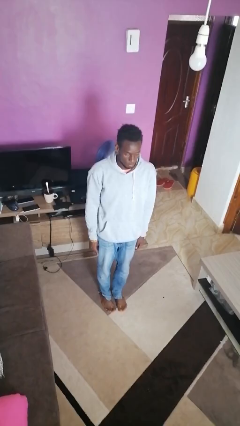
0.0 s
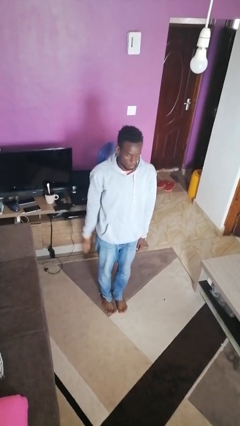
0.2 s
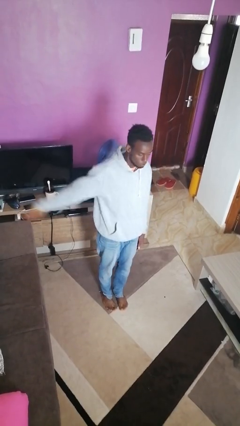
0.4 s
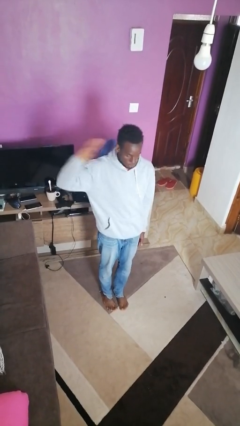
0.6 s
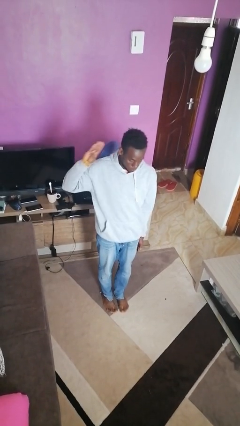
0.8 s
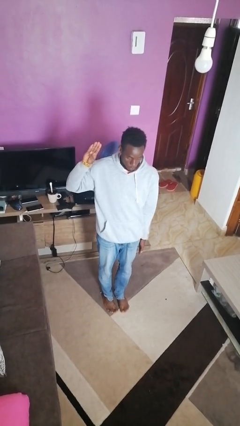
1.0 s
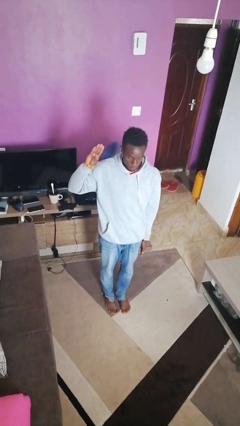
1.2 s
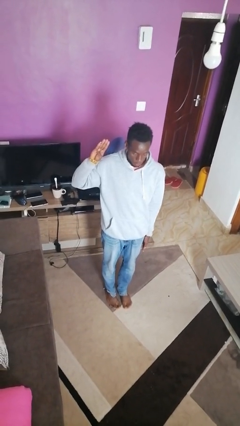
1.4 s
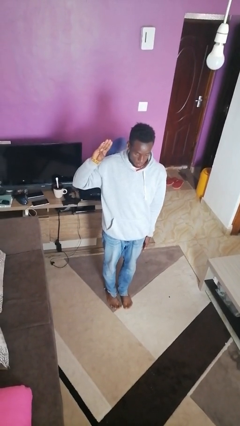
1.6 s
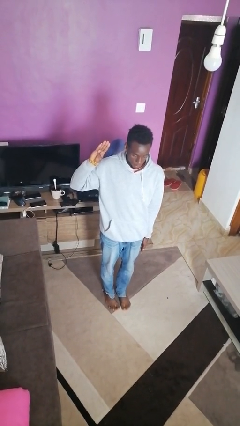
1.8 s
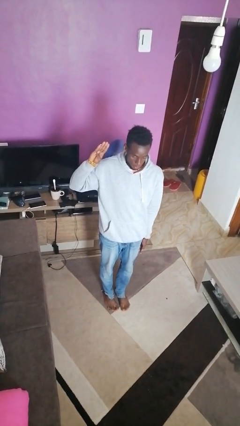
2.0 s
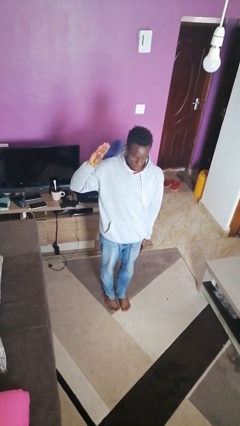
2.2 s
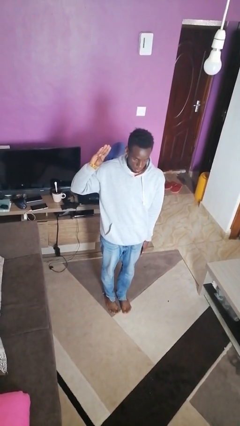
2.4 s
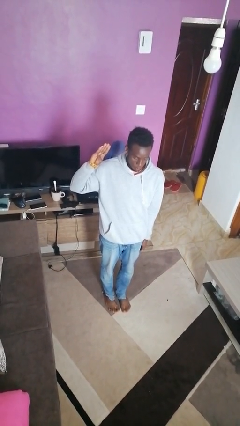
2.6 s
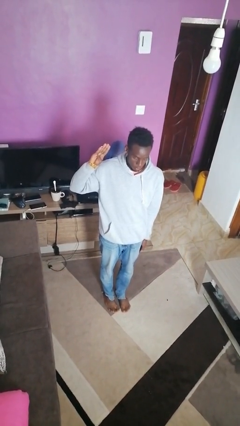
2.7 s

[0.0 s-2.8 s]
person salutes

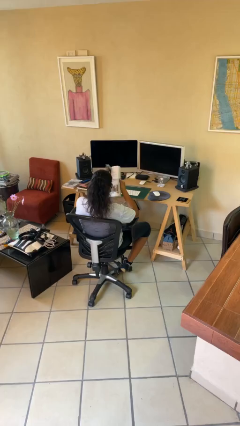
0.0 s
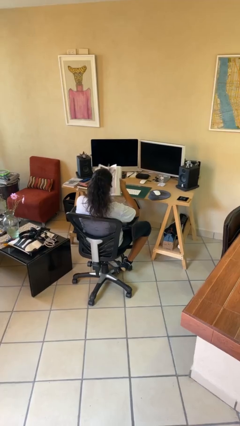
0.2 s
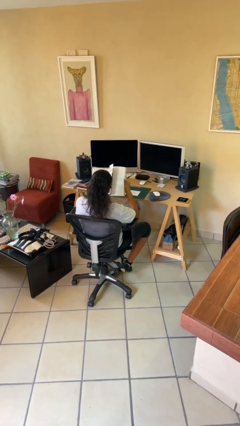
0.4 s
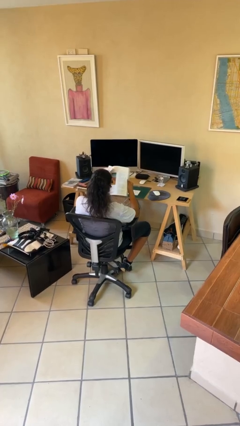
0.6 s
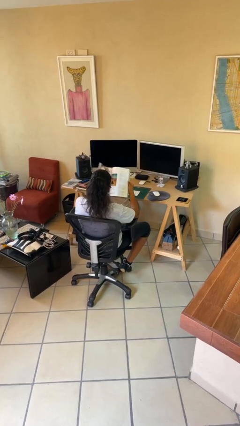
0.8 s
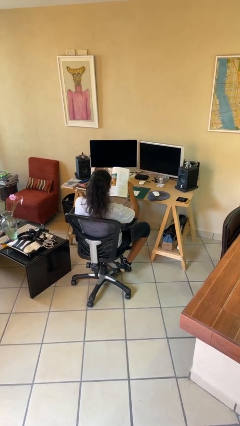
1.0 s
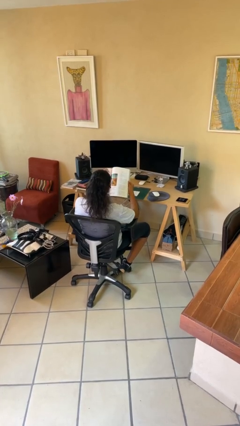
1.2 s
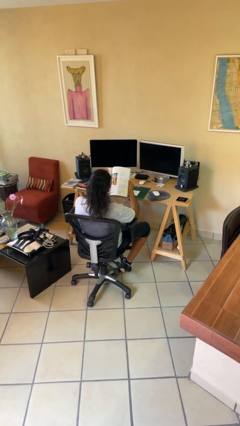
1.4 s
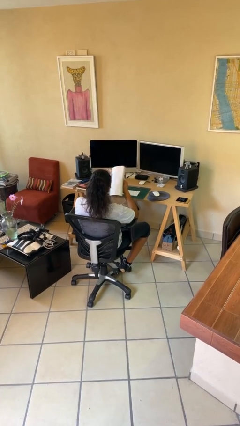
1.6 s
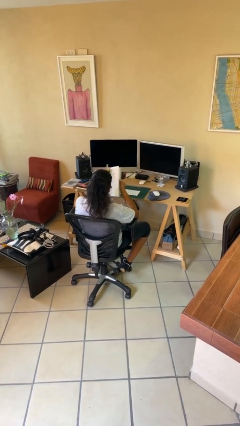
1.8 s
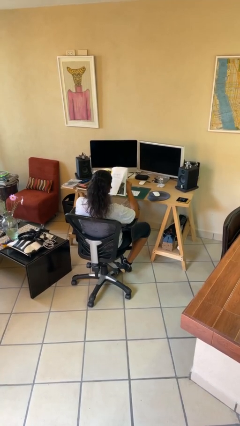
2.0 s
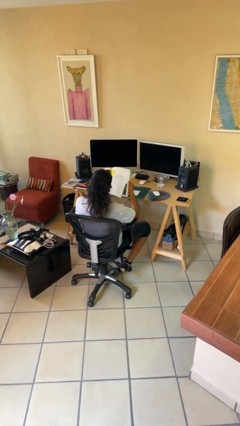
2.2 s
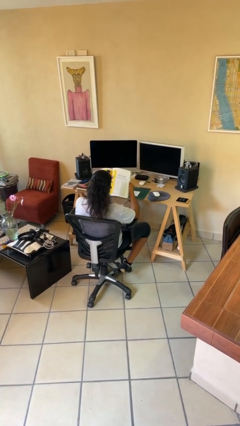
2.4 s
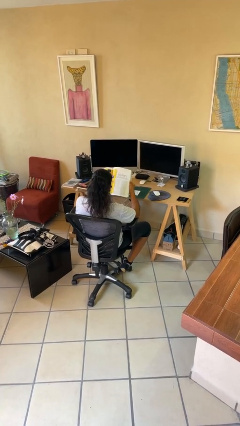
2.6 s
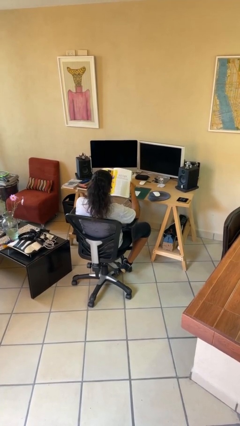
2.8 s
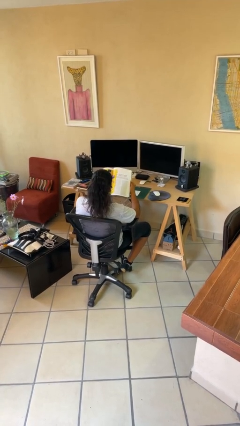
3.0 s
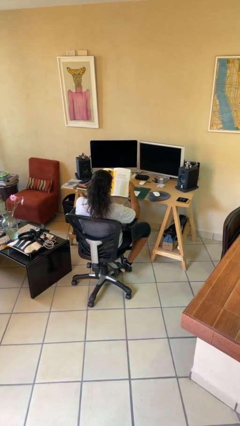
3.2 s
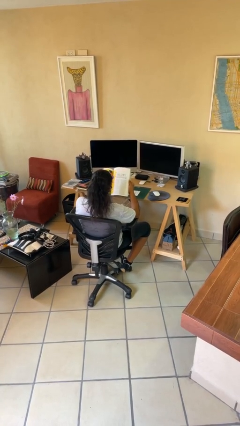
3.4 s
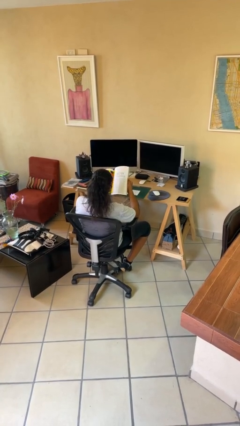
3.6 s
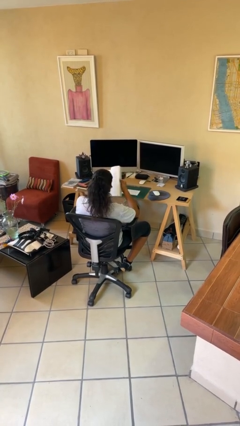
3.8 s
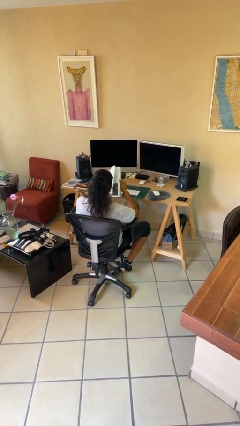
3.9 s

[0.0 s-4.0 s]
person reads magazine

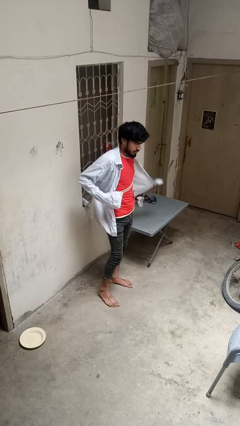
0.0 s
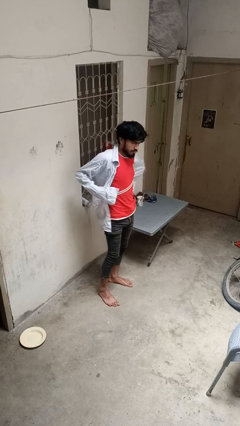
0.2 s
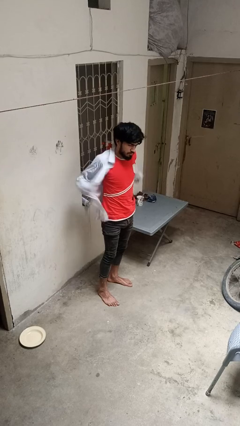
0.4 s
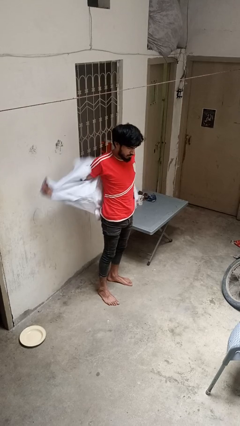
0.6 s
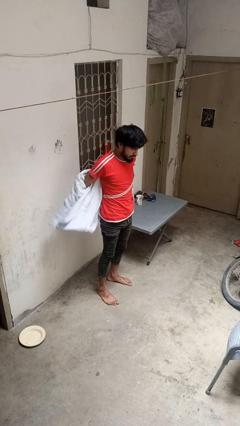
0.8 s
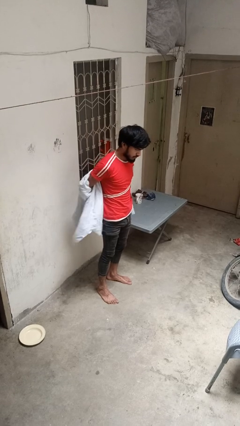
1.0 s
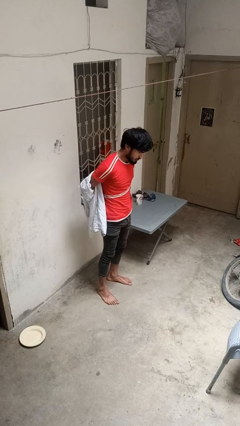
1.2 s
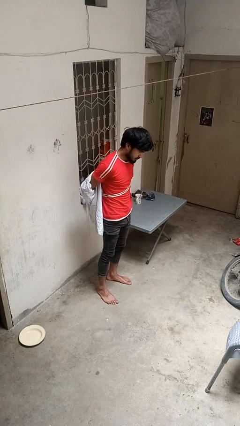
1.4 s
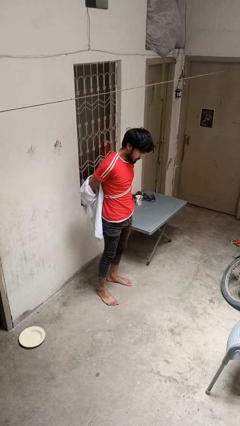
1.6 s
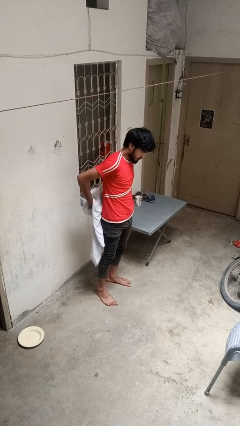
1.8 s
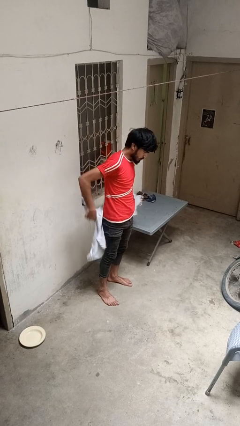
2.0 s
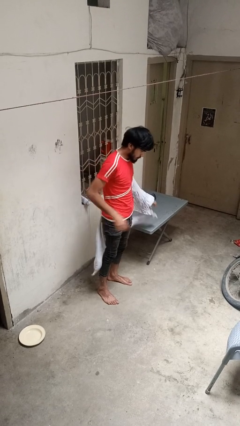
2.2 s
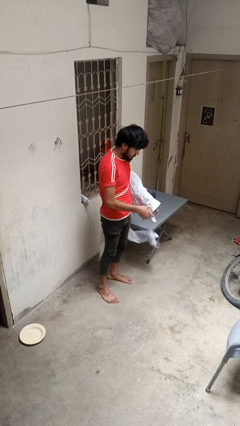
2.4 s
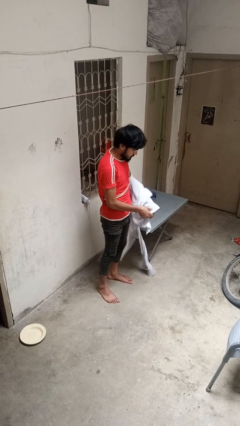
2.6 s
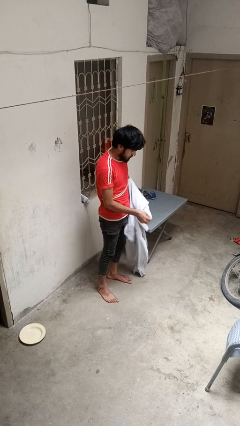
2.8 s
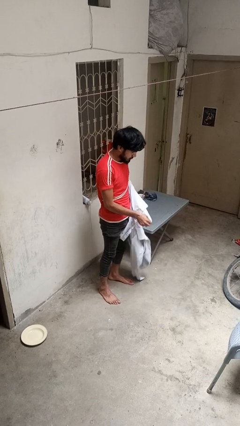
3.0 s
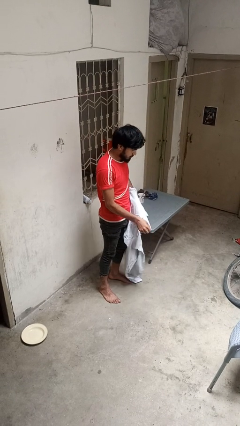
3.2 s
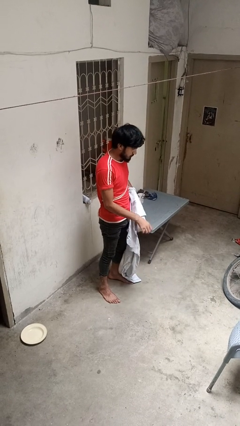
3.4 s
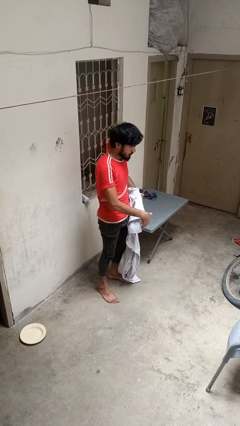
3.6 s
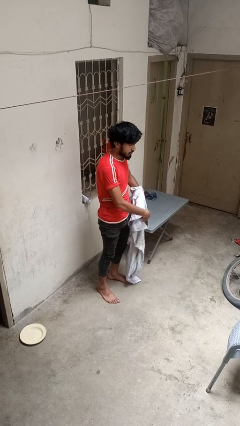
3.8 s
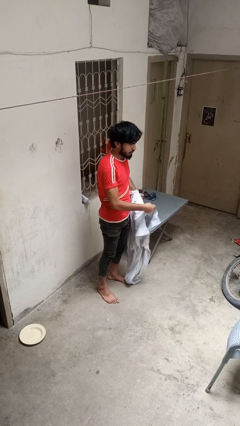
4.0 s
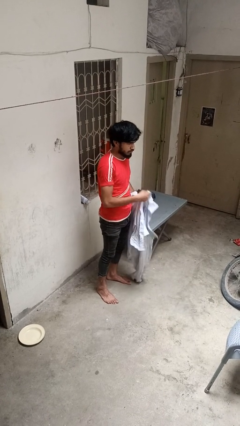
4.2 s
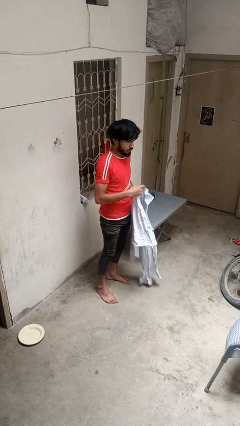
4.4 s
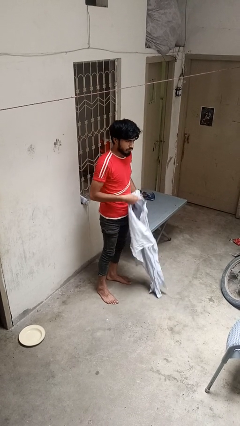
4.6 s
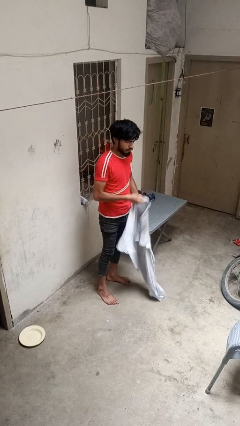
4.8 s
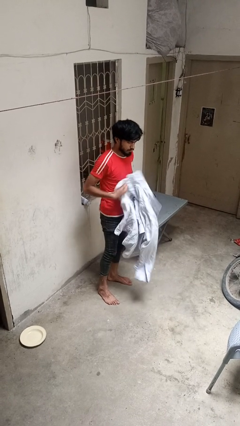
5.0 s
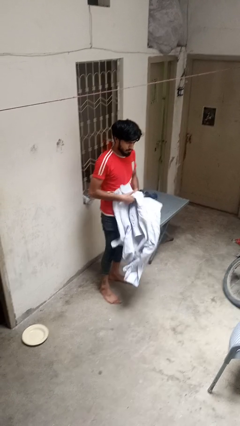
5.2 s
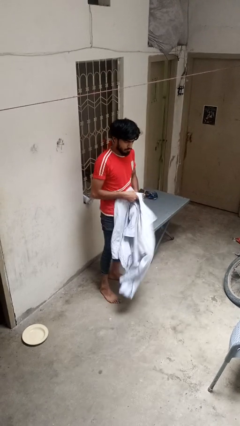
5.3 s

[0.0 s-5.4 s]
person takes off shirt

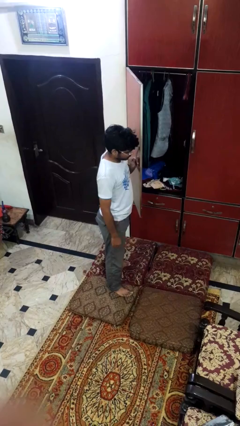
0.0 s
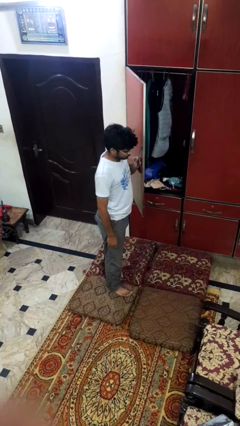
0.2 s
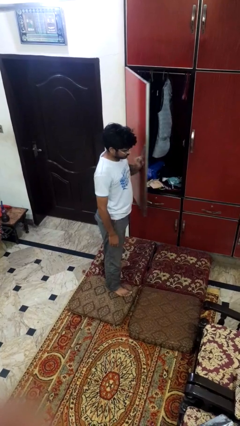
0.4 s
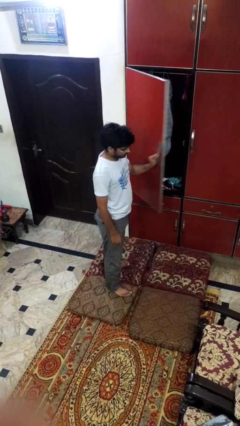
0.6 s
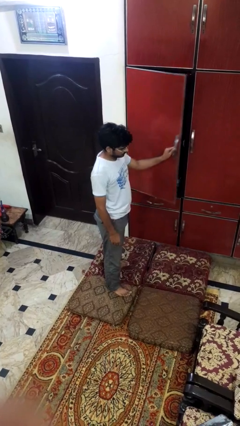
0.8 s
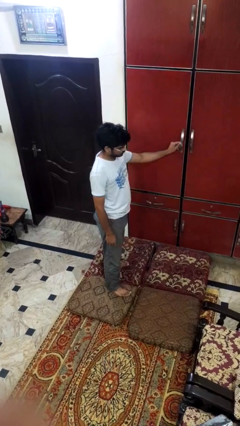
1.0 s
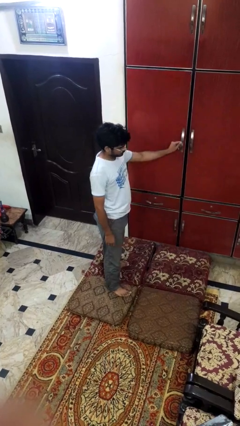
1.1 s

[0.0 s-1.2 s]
person closes closet door

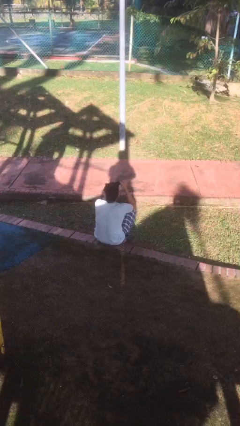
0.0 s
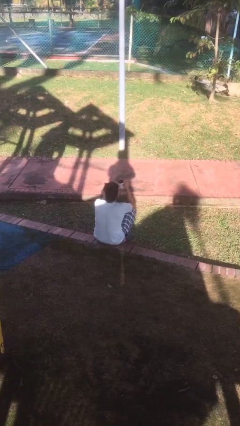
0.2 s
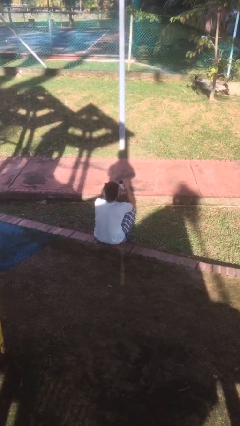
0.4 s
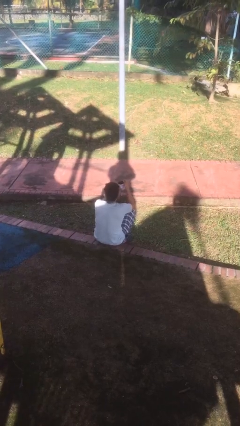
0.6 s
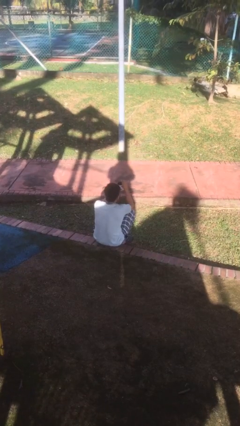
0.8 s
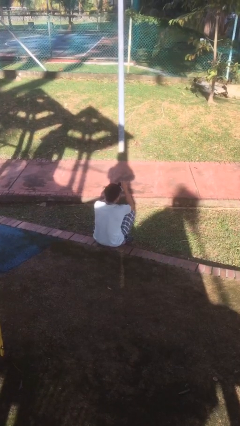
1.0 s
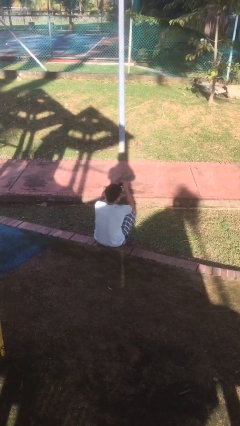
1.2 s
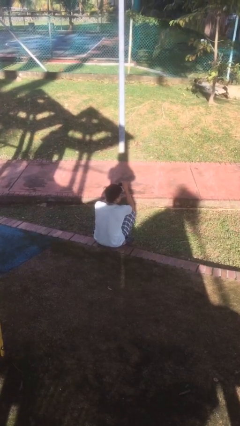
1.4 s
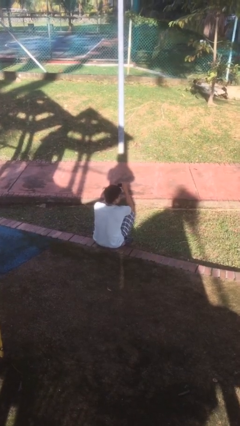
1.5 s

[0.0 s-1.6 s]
person stirs mug

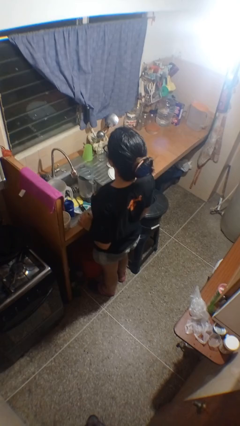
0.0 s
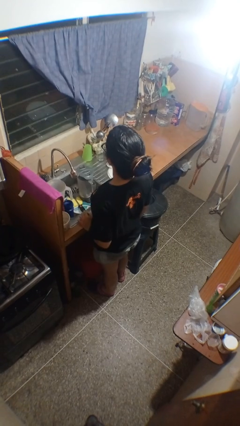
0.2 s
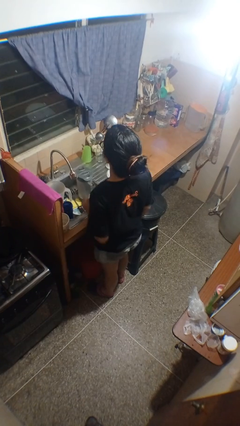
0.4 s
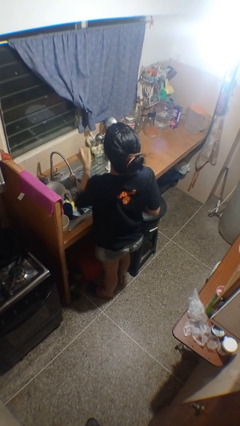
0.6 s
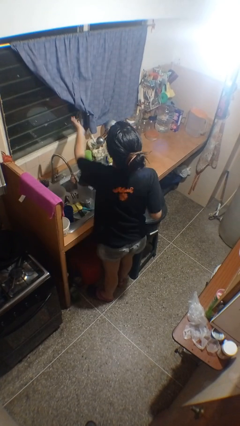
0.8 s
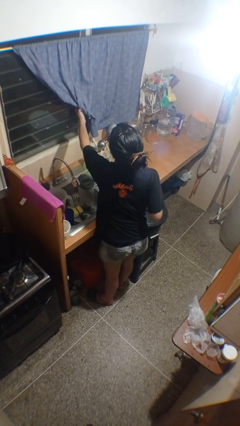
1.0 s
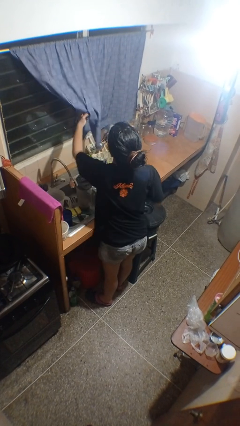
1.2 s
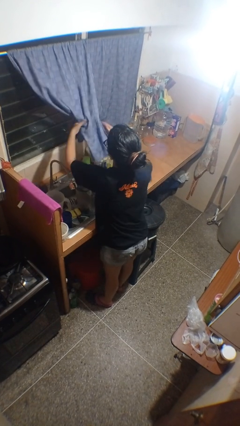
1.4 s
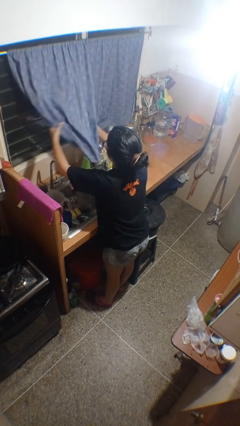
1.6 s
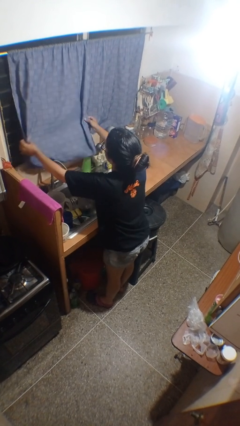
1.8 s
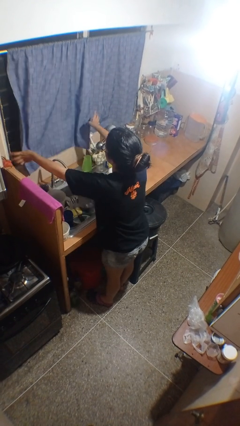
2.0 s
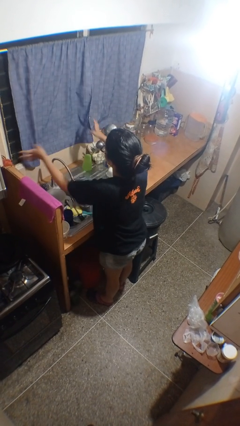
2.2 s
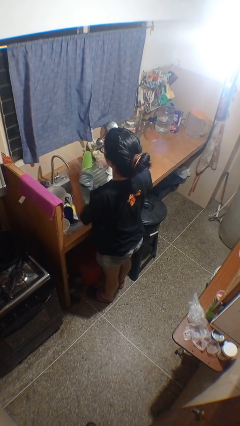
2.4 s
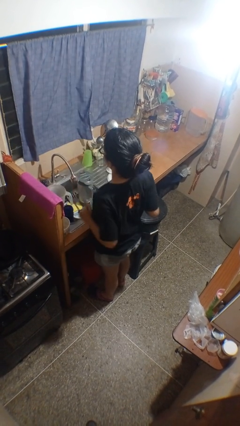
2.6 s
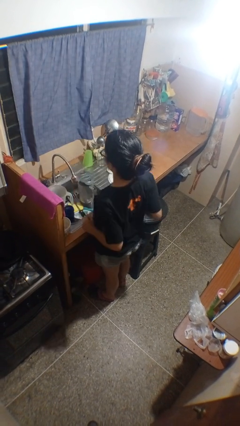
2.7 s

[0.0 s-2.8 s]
person closes curtains
